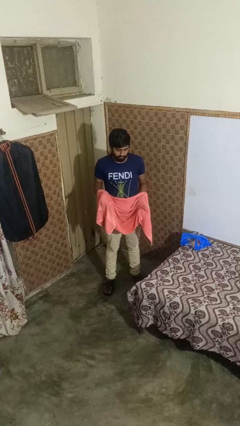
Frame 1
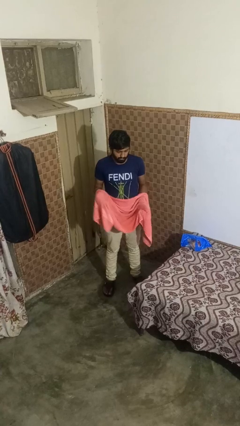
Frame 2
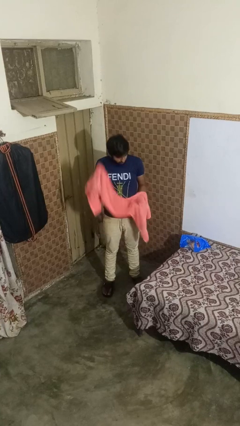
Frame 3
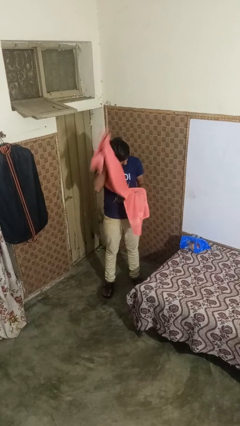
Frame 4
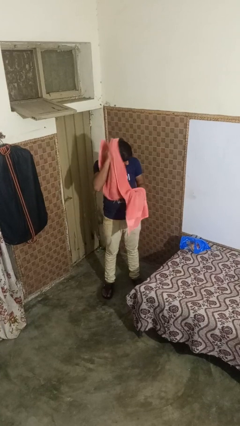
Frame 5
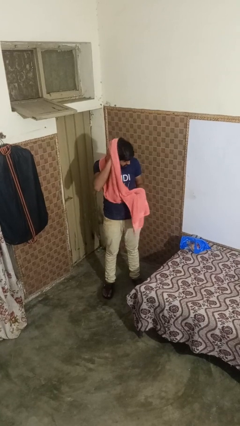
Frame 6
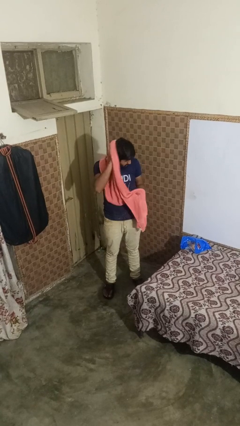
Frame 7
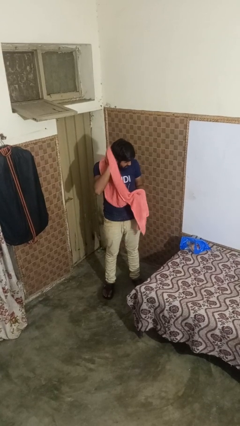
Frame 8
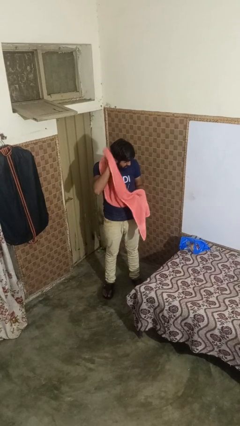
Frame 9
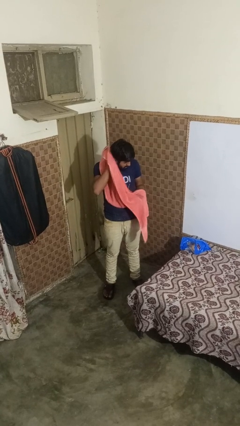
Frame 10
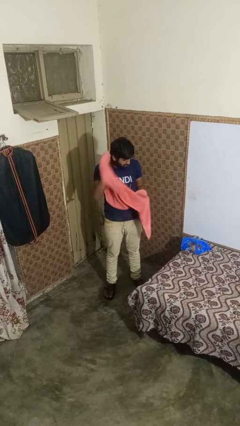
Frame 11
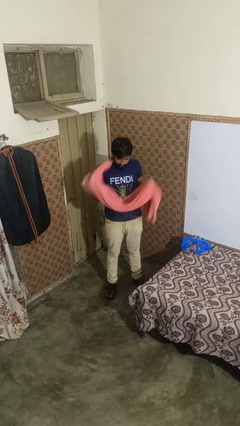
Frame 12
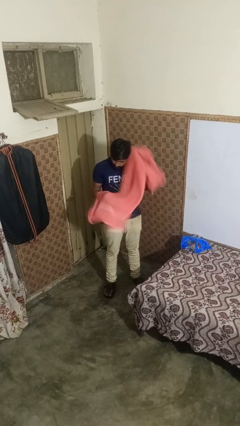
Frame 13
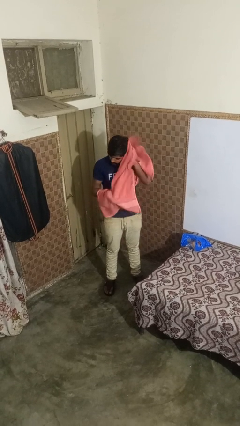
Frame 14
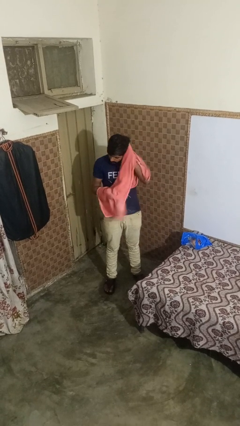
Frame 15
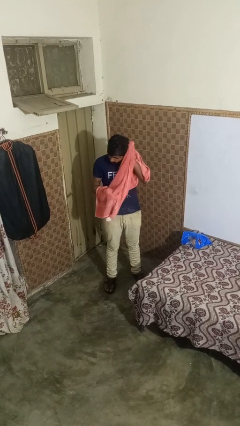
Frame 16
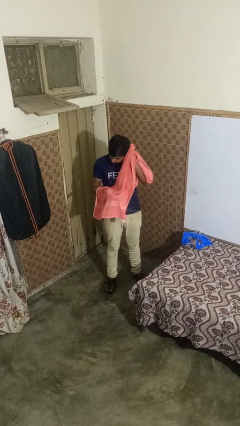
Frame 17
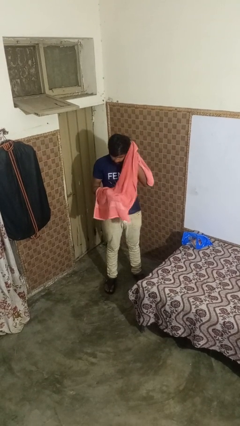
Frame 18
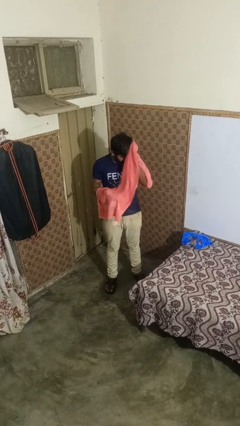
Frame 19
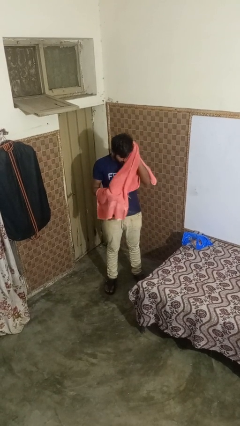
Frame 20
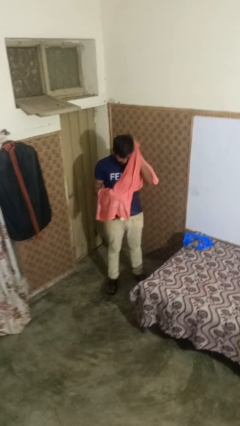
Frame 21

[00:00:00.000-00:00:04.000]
person dries hair with towel

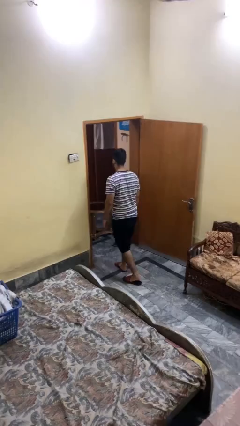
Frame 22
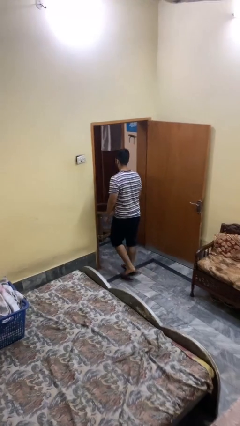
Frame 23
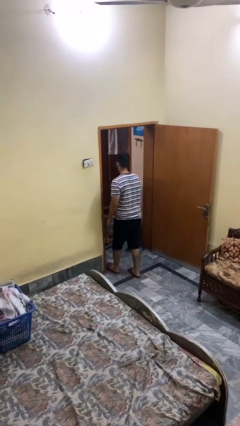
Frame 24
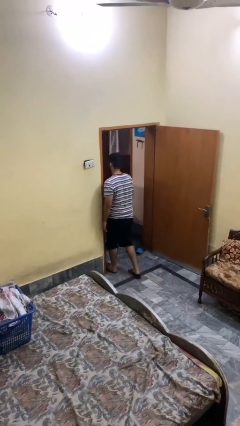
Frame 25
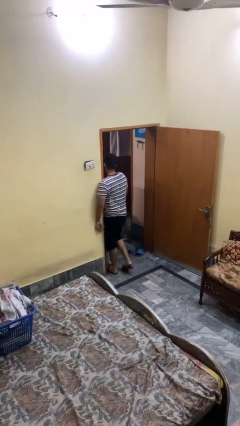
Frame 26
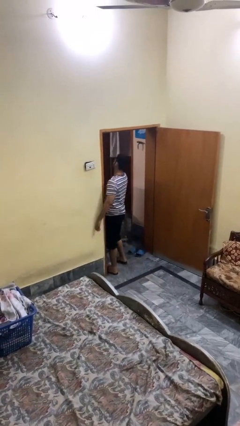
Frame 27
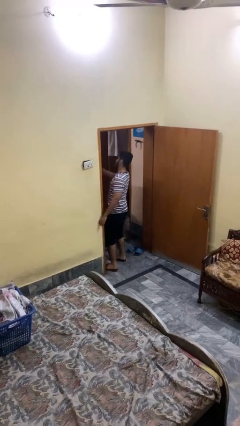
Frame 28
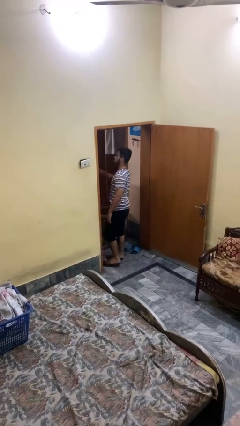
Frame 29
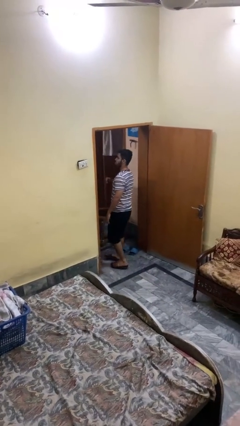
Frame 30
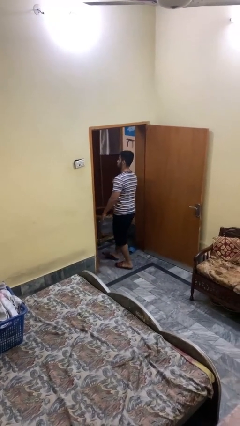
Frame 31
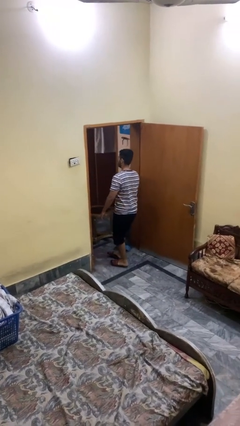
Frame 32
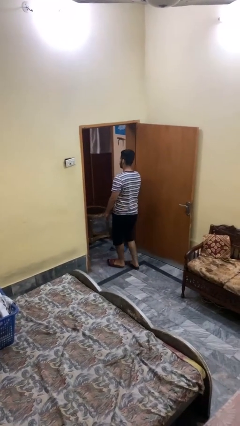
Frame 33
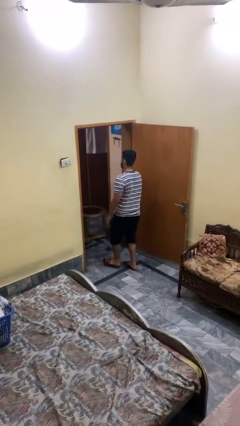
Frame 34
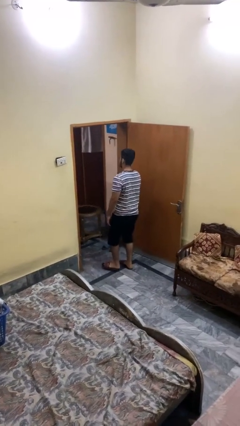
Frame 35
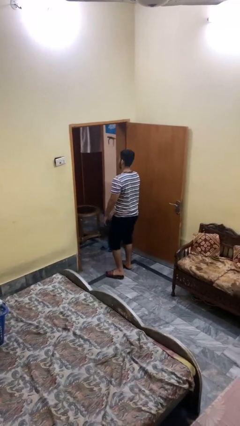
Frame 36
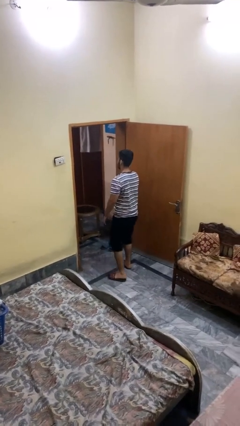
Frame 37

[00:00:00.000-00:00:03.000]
person bumps into wall

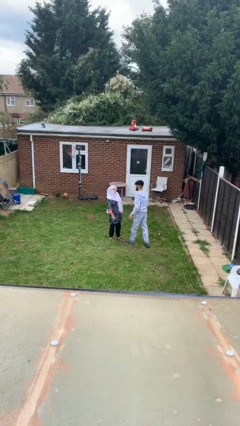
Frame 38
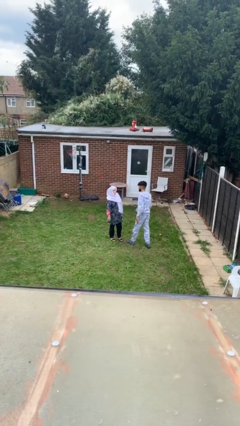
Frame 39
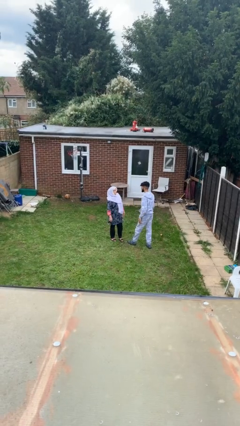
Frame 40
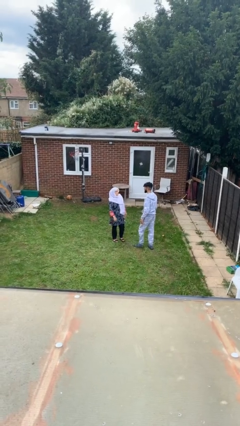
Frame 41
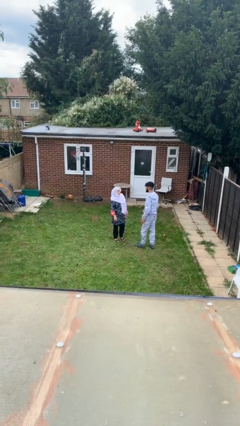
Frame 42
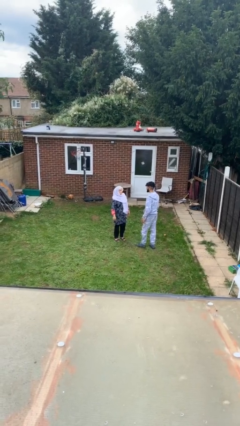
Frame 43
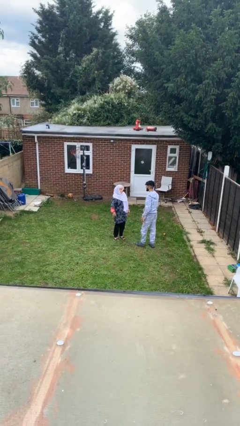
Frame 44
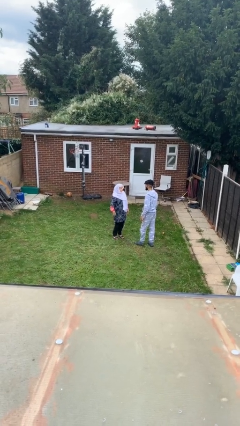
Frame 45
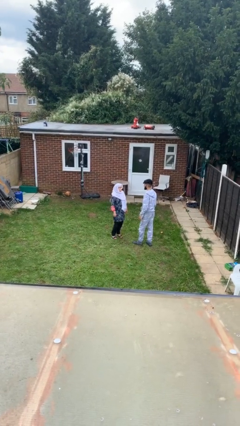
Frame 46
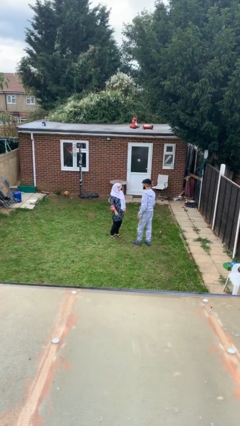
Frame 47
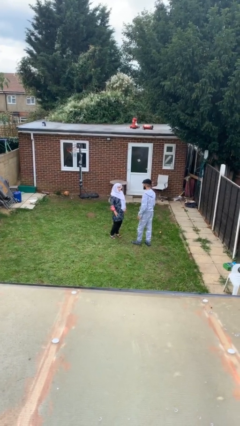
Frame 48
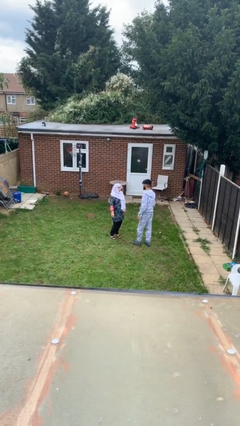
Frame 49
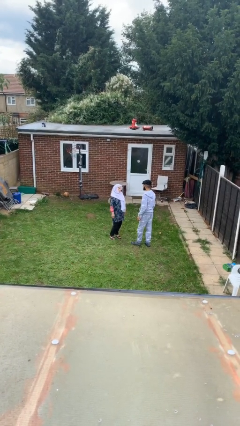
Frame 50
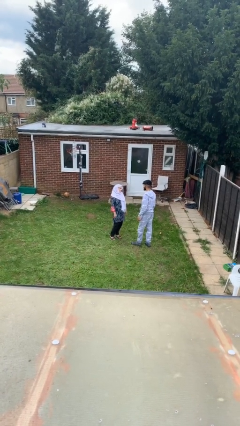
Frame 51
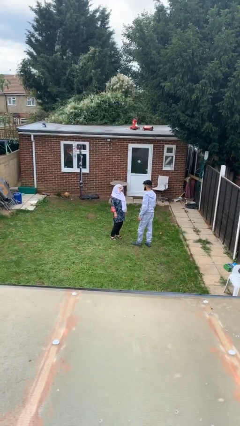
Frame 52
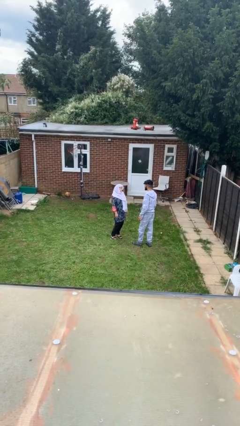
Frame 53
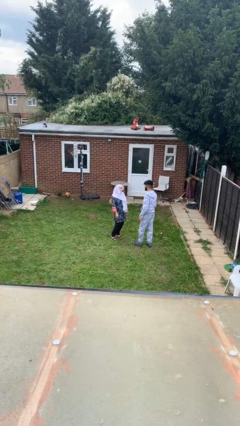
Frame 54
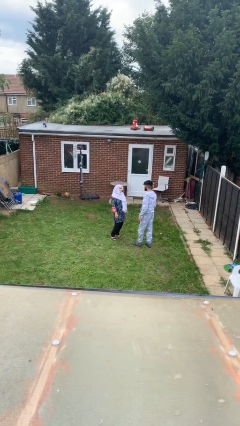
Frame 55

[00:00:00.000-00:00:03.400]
person talks to person

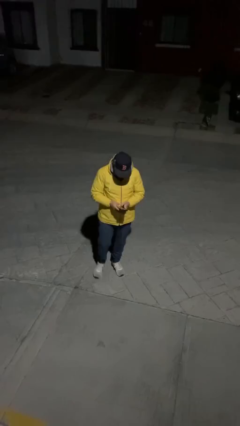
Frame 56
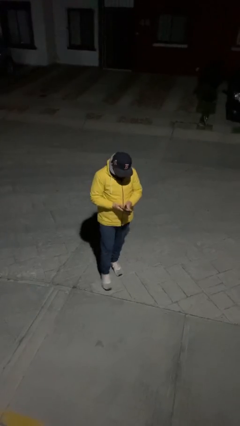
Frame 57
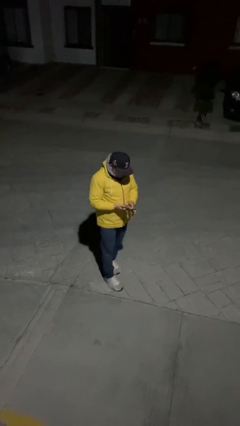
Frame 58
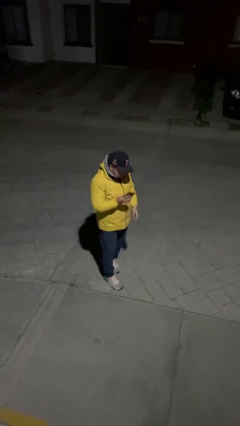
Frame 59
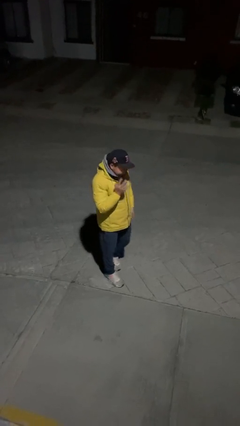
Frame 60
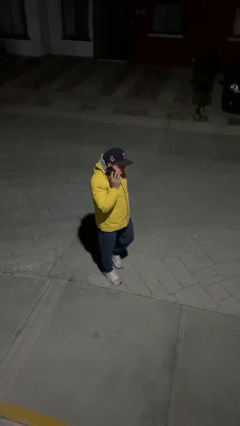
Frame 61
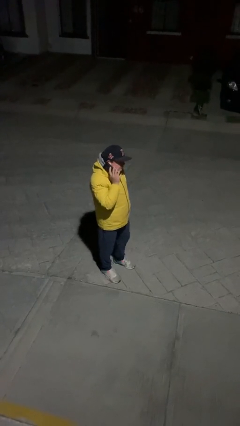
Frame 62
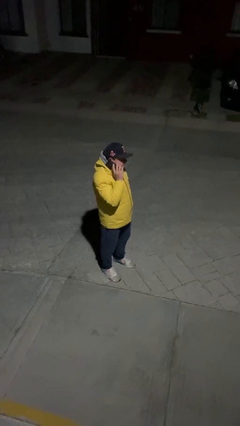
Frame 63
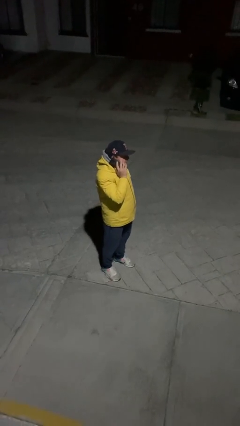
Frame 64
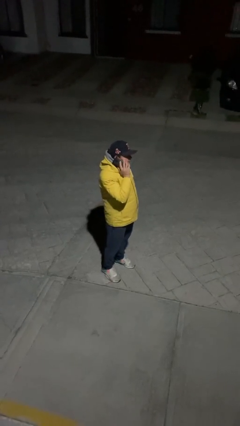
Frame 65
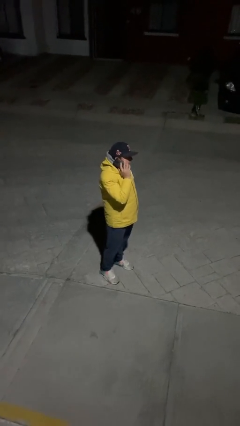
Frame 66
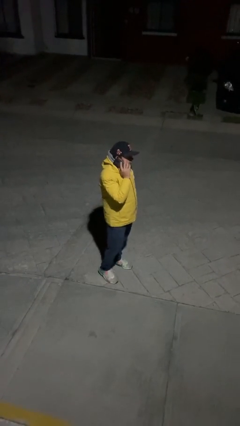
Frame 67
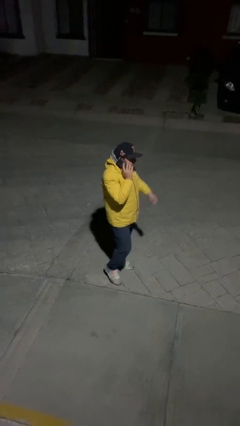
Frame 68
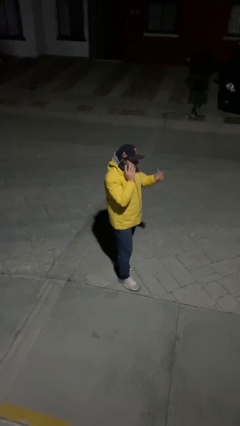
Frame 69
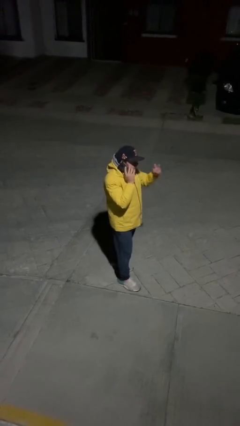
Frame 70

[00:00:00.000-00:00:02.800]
person talks on phone

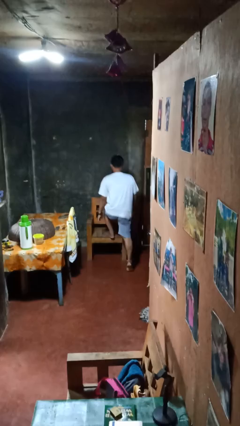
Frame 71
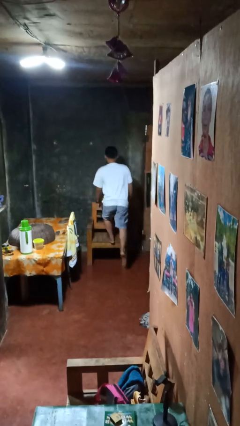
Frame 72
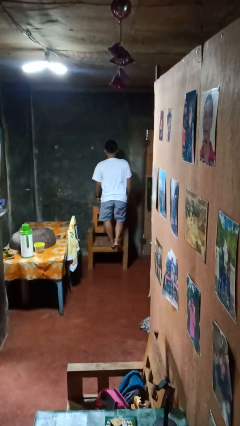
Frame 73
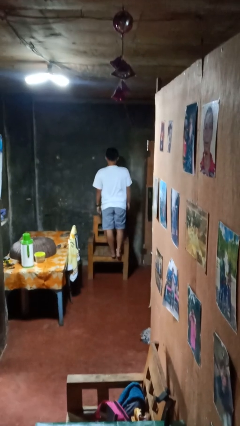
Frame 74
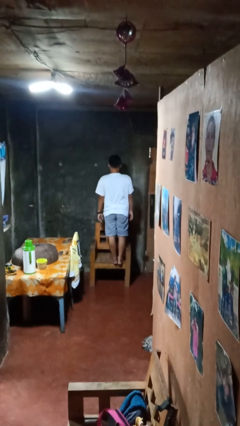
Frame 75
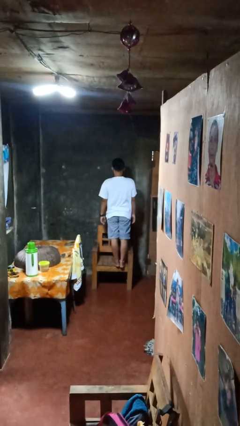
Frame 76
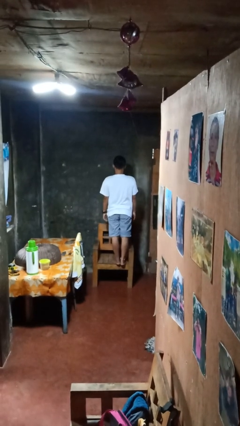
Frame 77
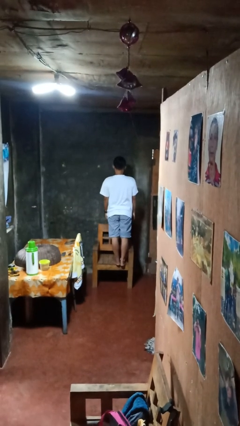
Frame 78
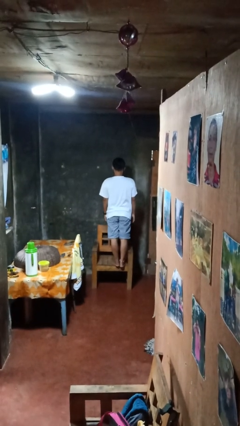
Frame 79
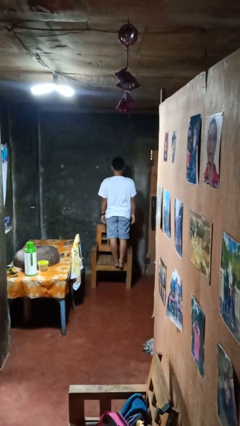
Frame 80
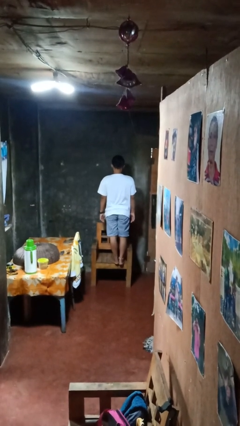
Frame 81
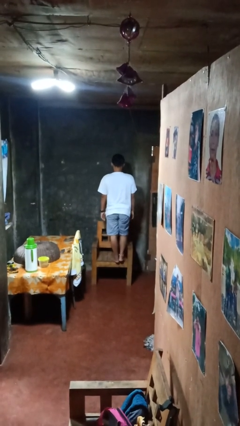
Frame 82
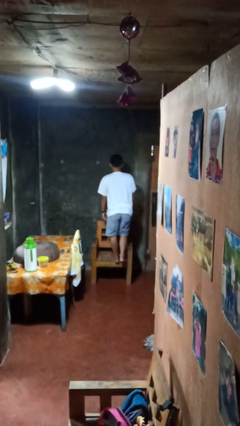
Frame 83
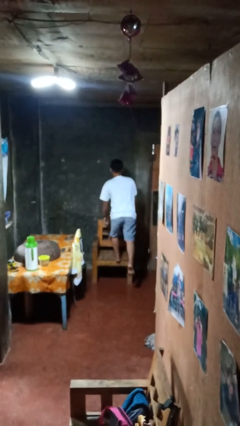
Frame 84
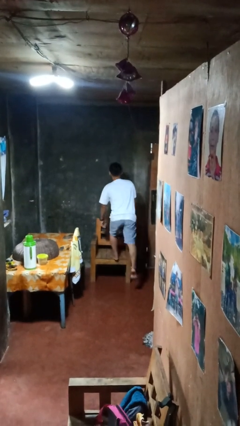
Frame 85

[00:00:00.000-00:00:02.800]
person climbs on chair

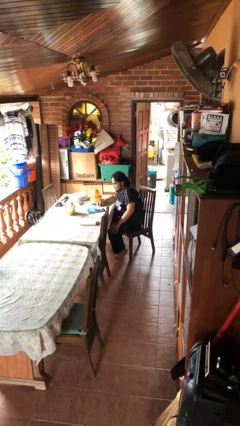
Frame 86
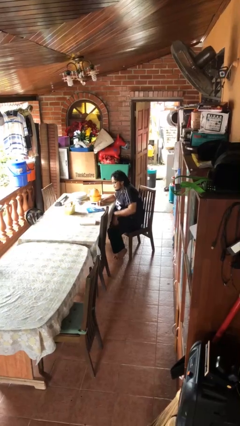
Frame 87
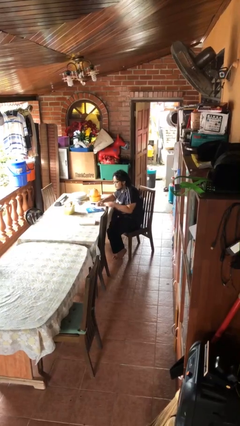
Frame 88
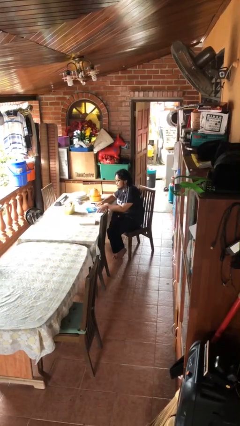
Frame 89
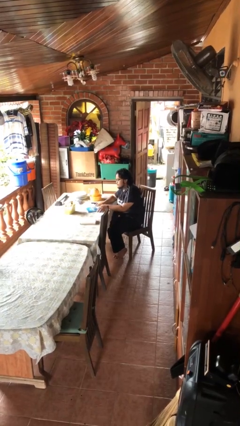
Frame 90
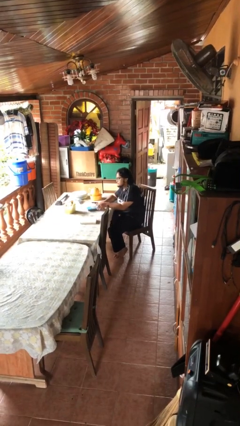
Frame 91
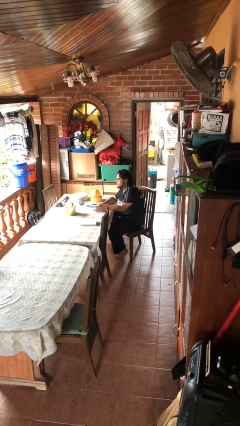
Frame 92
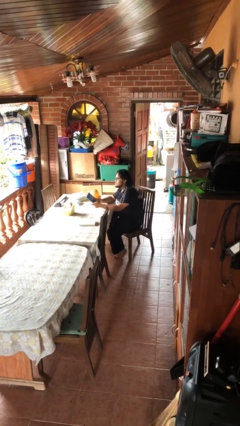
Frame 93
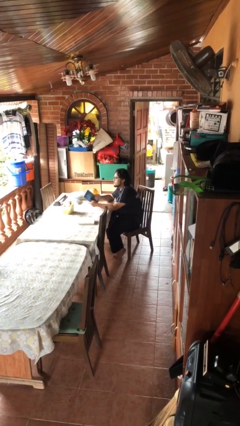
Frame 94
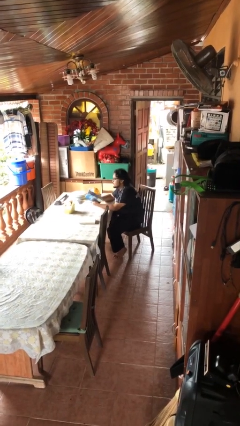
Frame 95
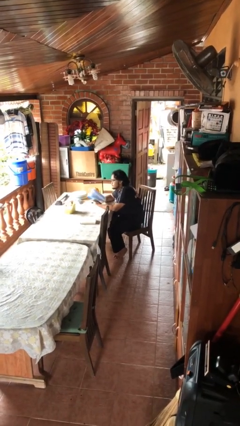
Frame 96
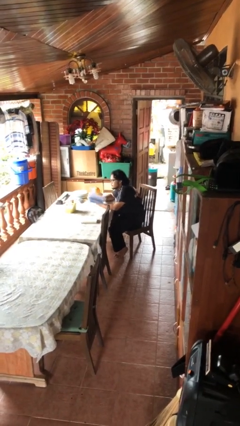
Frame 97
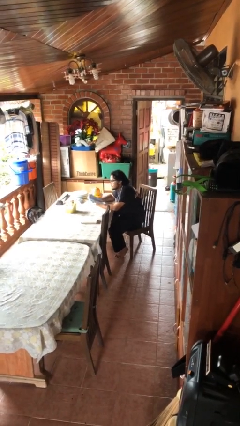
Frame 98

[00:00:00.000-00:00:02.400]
person picks up object from table
